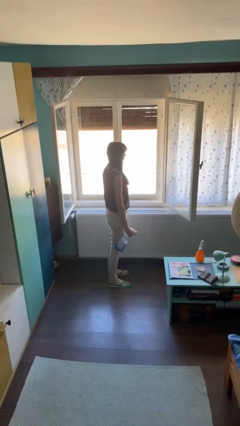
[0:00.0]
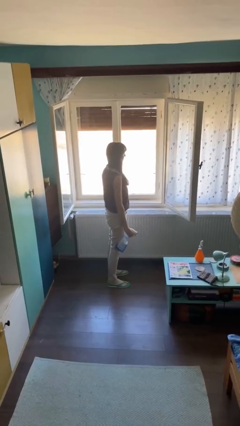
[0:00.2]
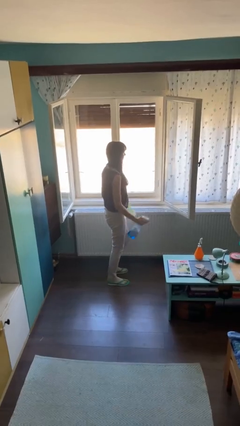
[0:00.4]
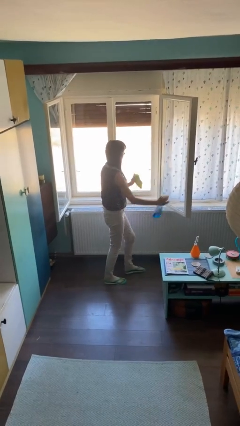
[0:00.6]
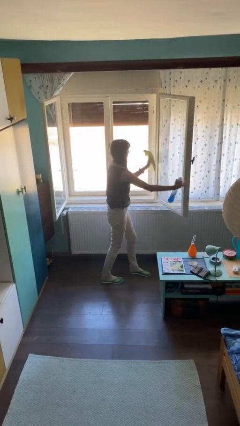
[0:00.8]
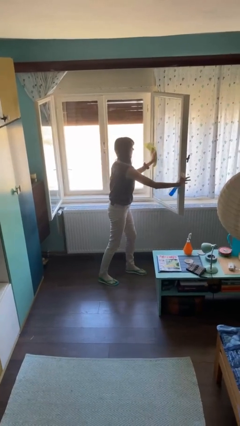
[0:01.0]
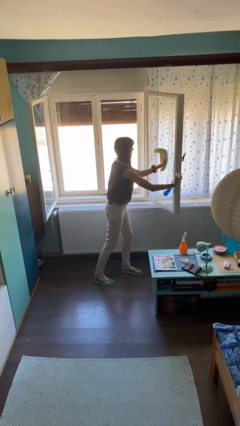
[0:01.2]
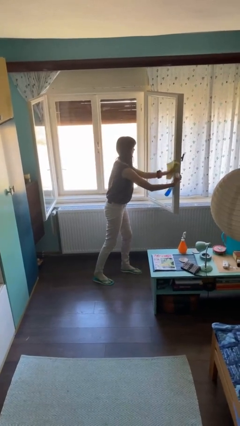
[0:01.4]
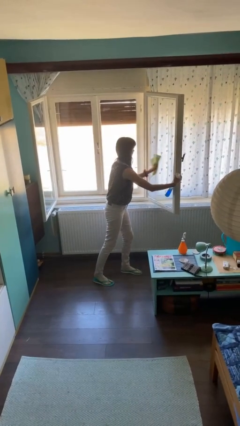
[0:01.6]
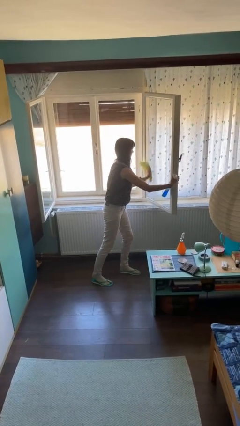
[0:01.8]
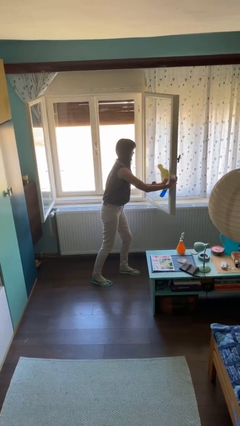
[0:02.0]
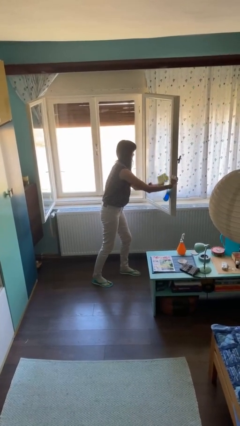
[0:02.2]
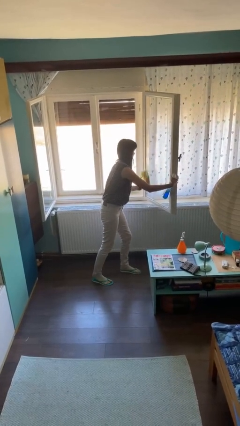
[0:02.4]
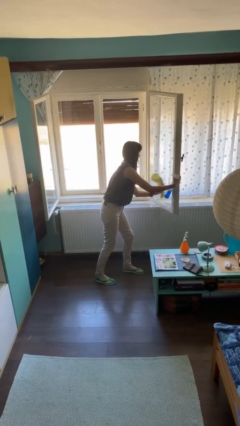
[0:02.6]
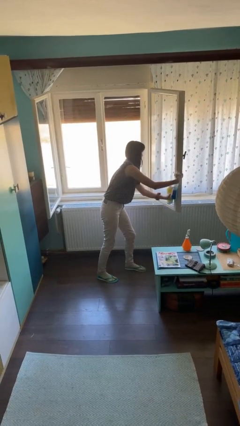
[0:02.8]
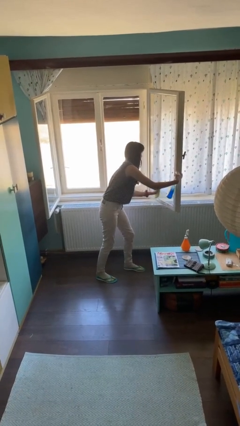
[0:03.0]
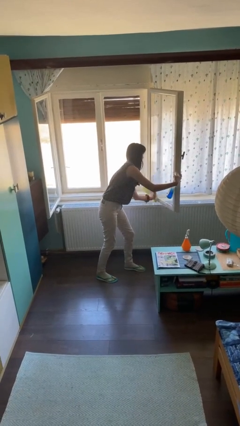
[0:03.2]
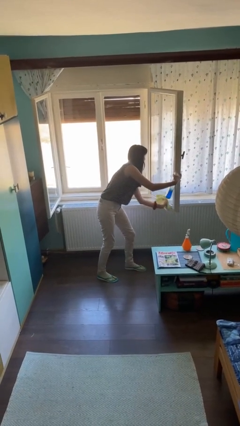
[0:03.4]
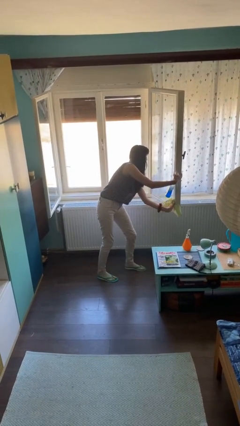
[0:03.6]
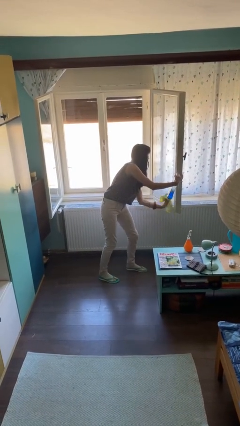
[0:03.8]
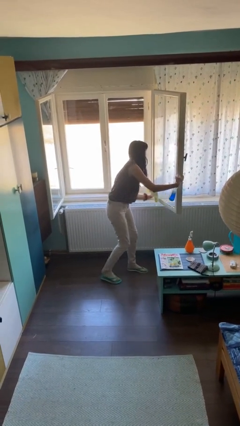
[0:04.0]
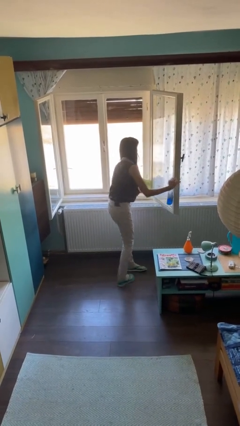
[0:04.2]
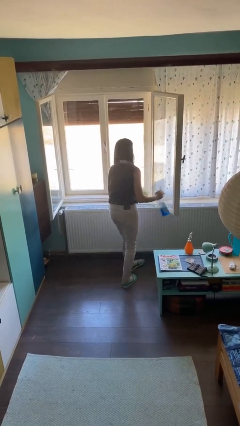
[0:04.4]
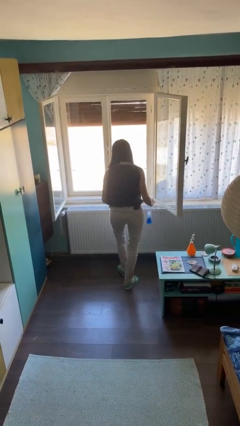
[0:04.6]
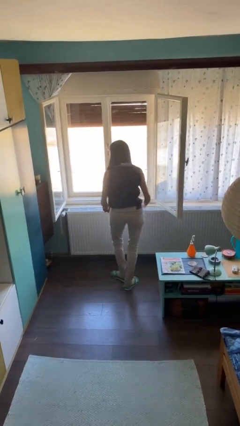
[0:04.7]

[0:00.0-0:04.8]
person washes window

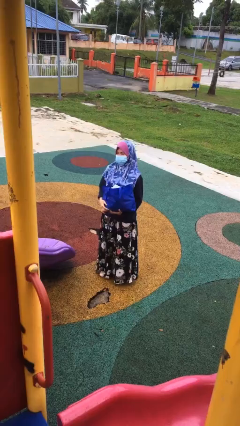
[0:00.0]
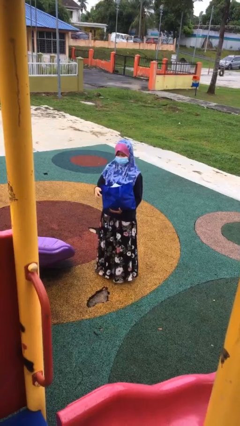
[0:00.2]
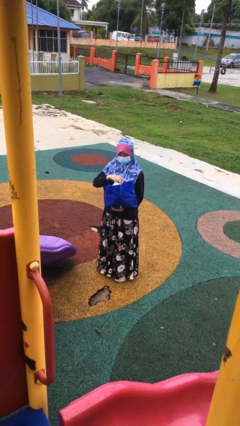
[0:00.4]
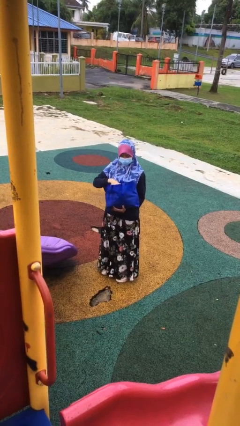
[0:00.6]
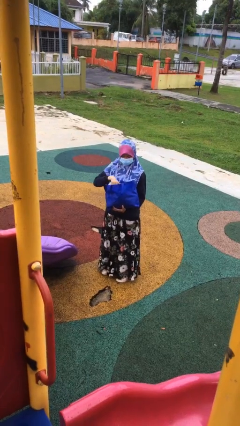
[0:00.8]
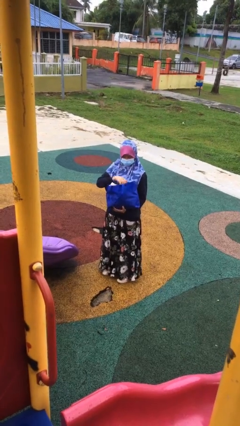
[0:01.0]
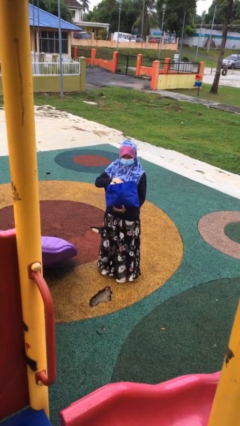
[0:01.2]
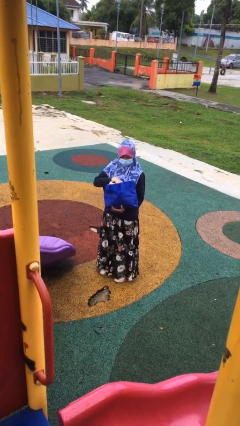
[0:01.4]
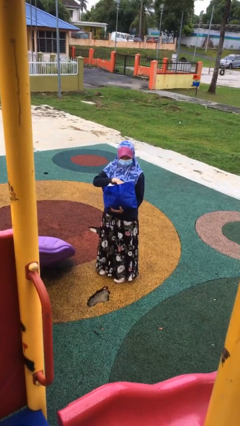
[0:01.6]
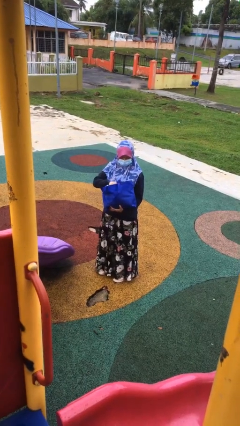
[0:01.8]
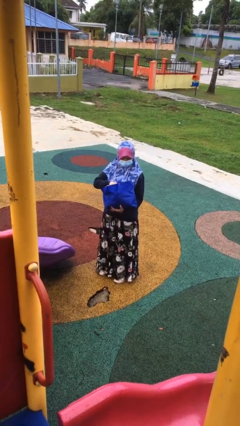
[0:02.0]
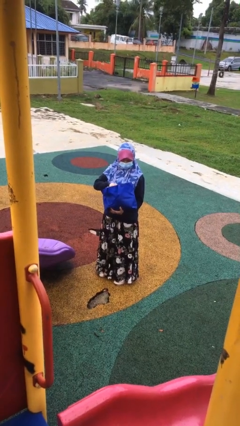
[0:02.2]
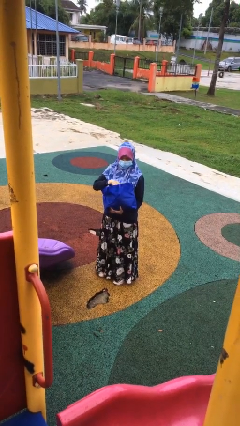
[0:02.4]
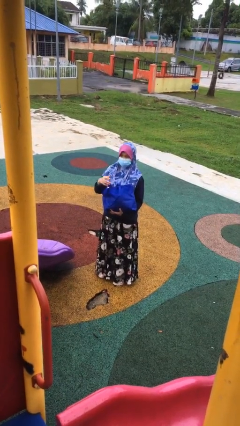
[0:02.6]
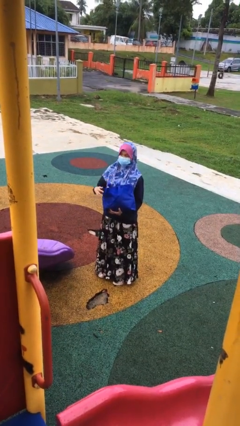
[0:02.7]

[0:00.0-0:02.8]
person searches in bag

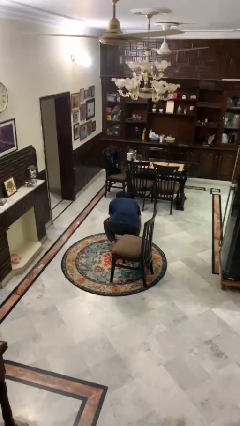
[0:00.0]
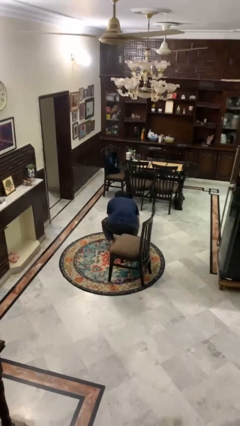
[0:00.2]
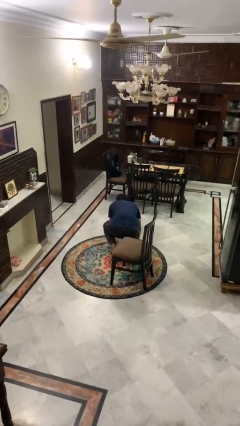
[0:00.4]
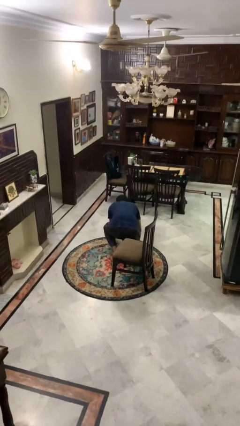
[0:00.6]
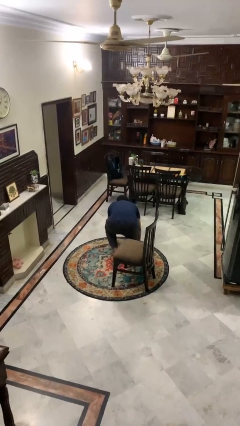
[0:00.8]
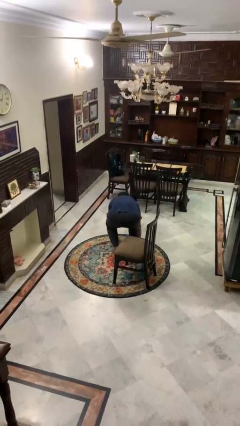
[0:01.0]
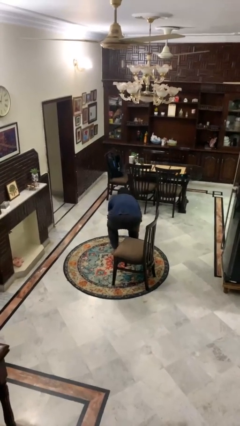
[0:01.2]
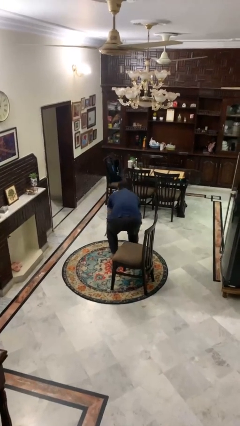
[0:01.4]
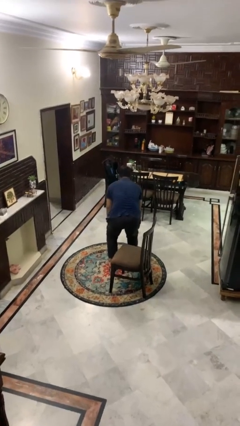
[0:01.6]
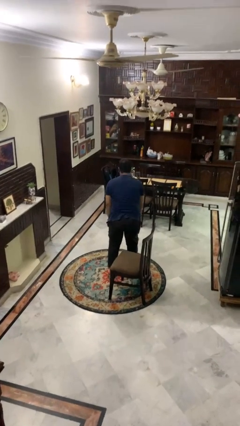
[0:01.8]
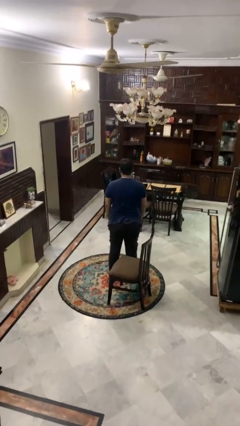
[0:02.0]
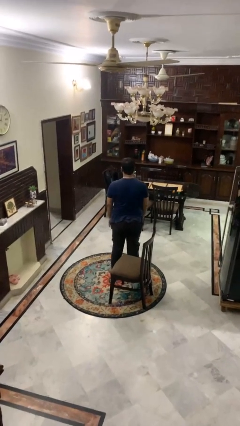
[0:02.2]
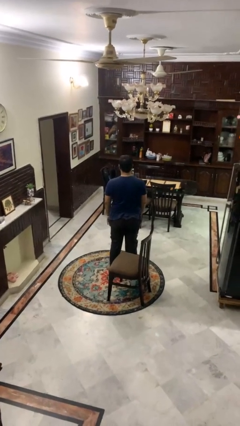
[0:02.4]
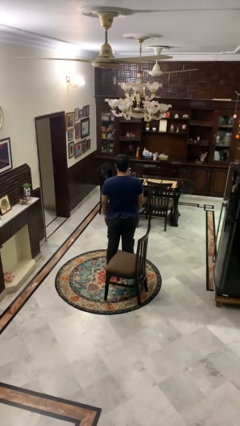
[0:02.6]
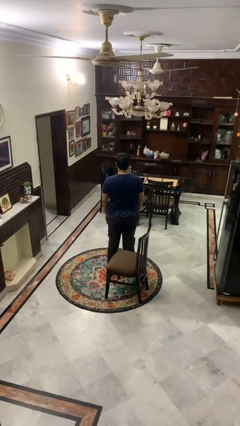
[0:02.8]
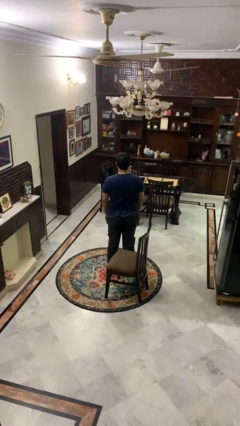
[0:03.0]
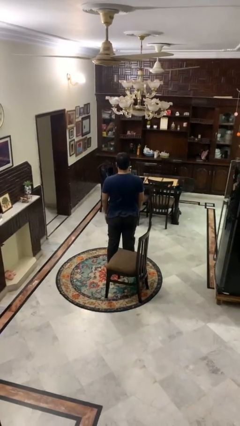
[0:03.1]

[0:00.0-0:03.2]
person stands up from floor

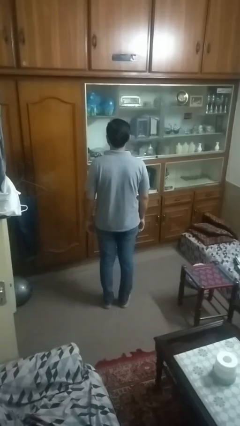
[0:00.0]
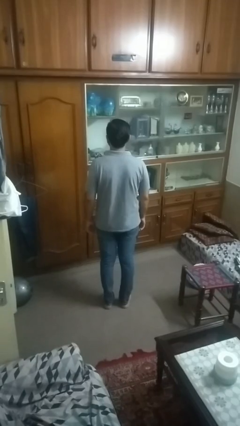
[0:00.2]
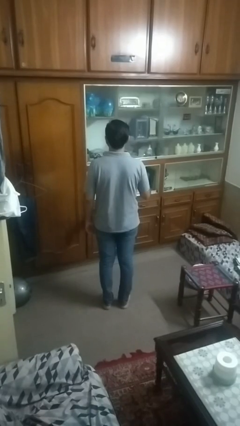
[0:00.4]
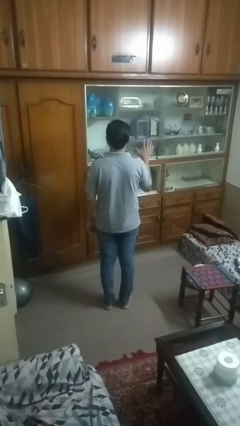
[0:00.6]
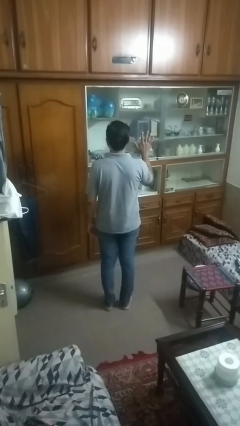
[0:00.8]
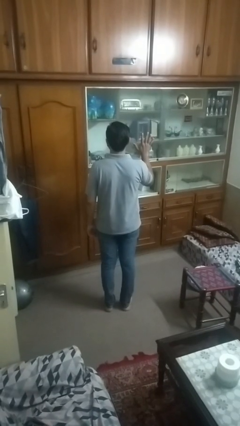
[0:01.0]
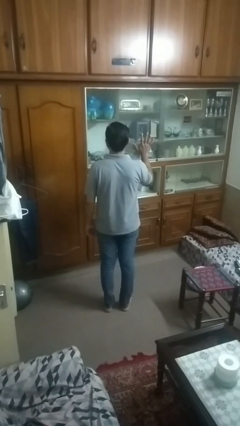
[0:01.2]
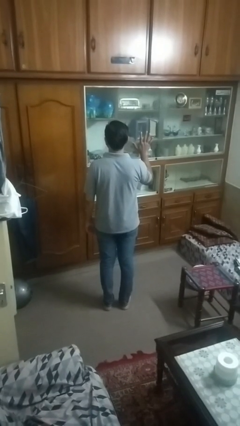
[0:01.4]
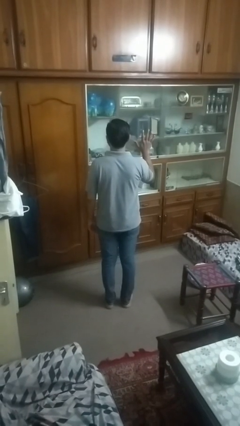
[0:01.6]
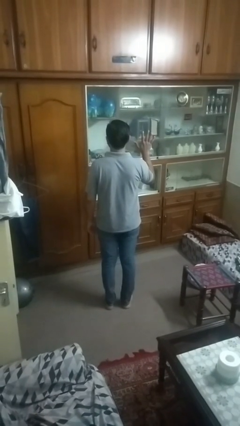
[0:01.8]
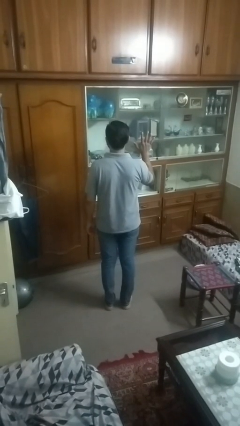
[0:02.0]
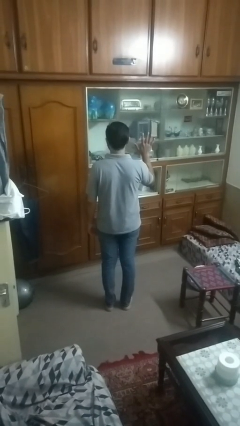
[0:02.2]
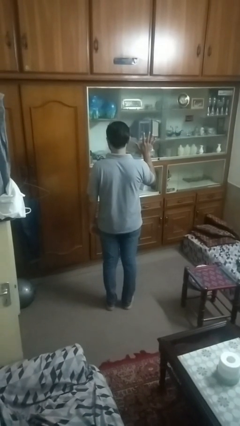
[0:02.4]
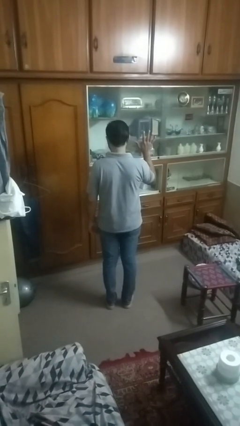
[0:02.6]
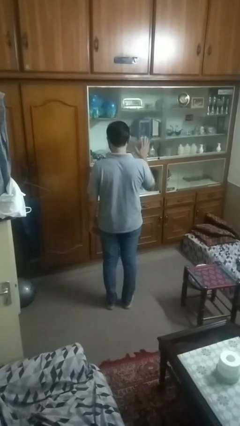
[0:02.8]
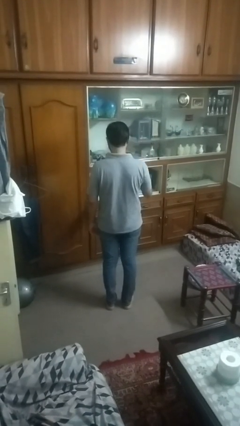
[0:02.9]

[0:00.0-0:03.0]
person gestures number five

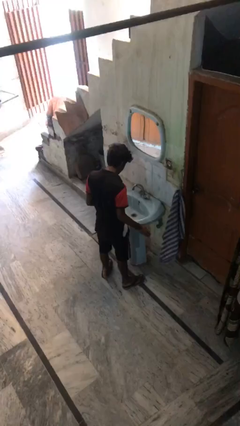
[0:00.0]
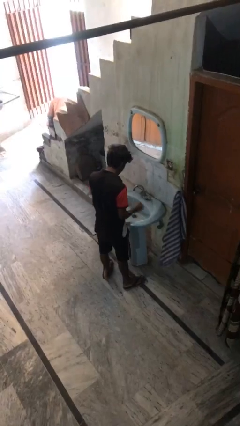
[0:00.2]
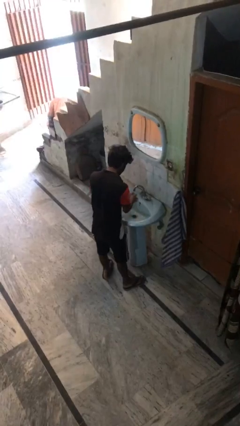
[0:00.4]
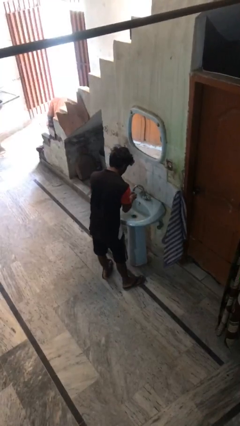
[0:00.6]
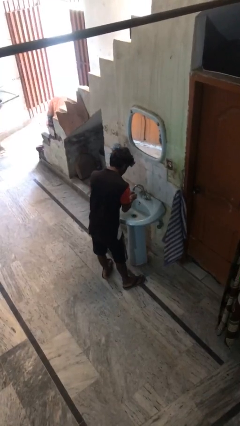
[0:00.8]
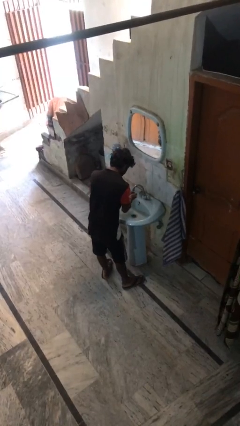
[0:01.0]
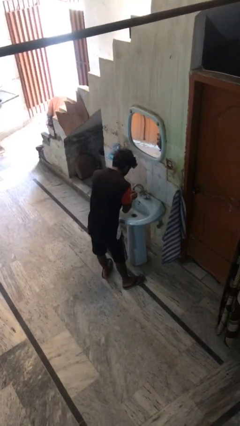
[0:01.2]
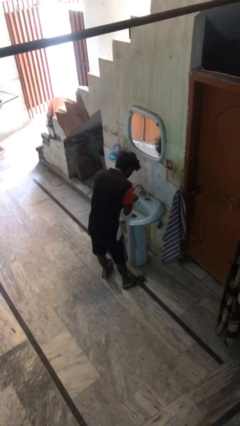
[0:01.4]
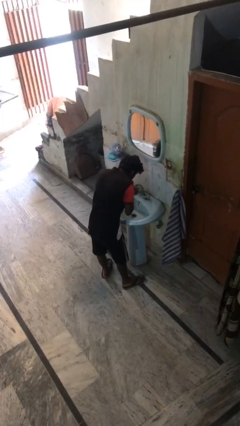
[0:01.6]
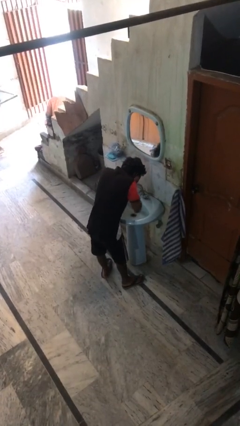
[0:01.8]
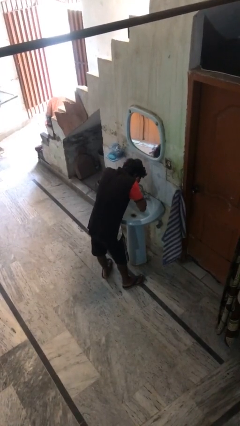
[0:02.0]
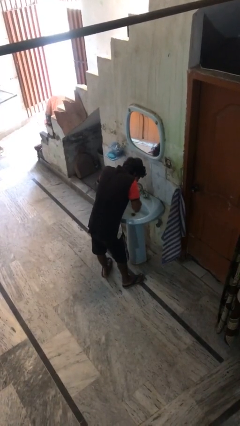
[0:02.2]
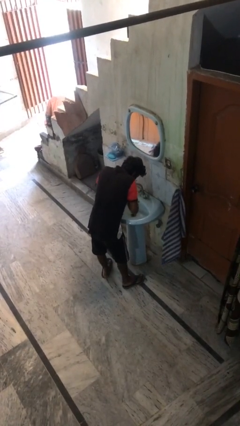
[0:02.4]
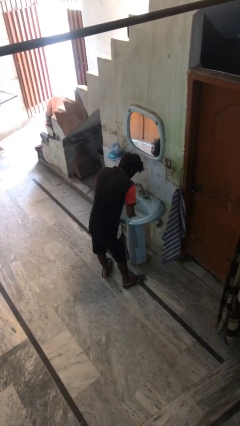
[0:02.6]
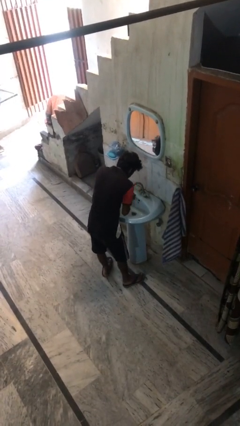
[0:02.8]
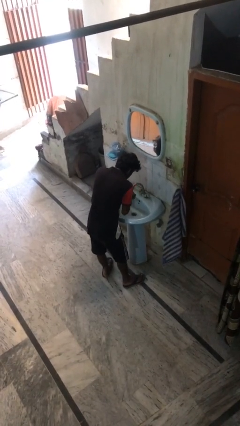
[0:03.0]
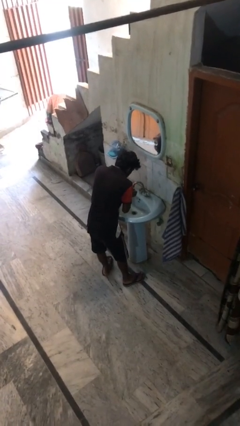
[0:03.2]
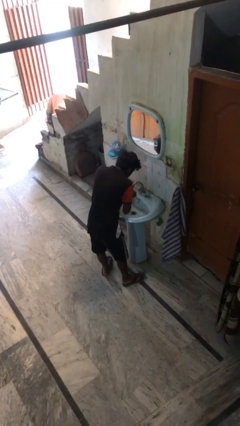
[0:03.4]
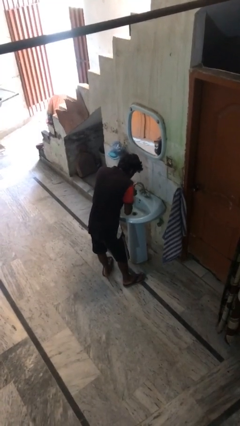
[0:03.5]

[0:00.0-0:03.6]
person washes face
